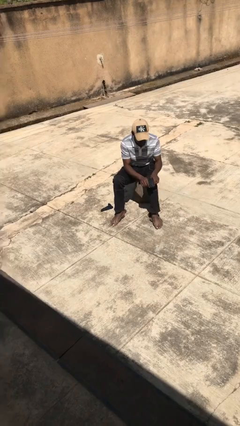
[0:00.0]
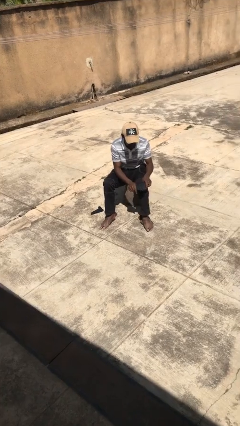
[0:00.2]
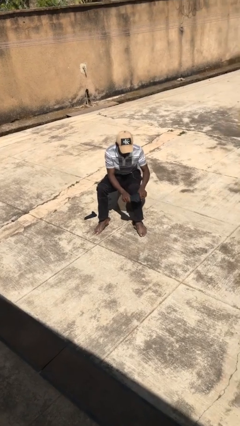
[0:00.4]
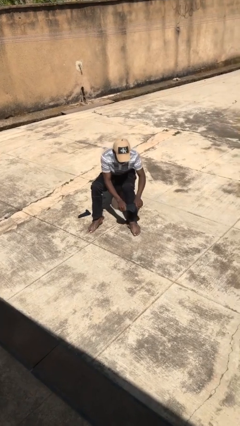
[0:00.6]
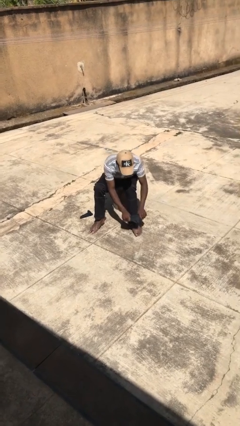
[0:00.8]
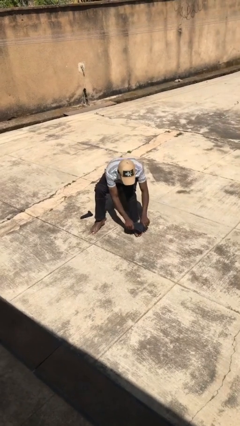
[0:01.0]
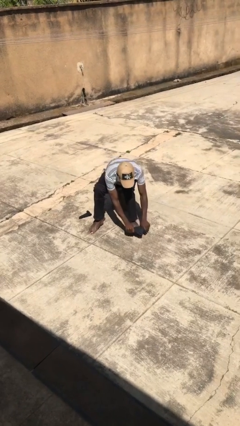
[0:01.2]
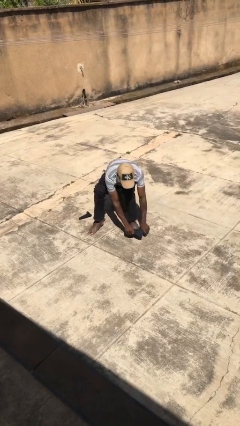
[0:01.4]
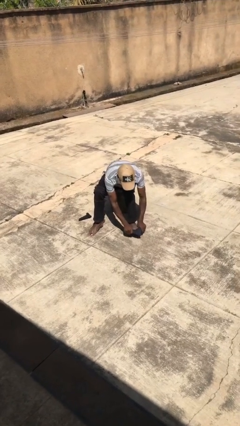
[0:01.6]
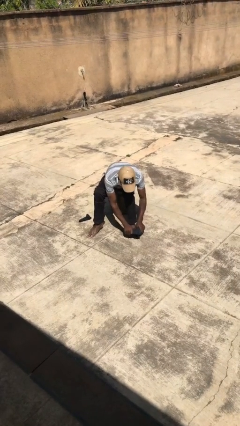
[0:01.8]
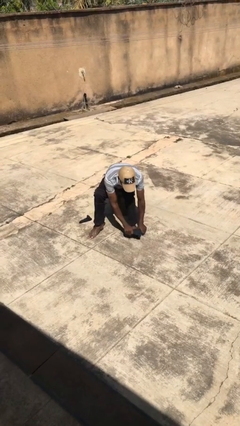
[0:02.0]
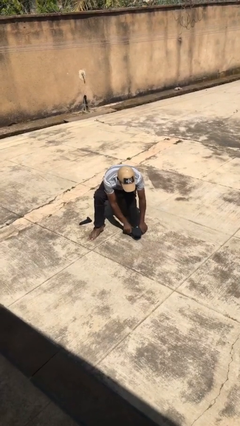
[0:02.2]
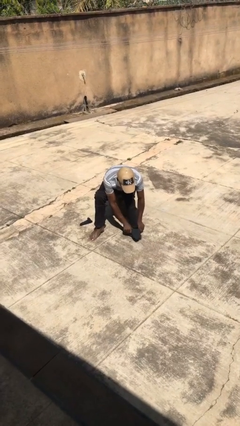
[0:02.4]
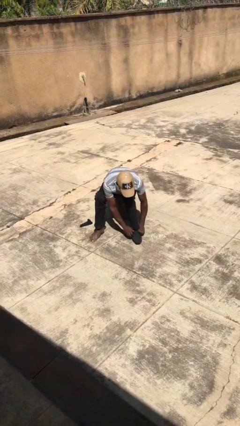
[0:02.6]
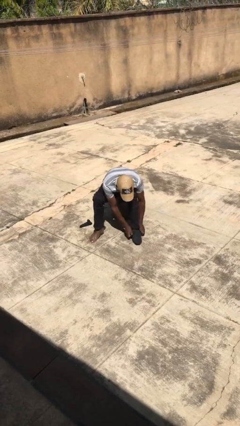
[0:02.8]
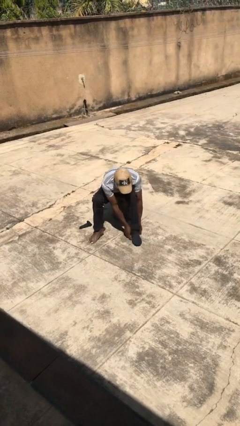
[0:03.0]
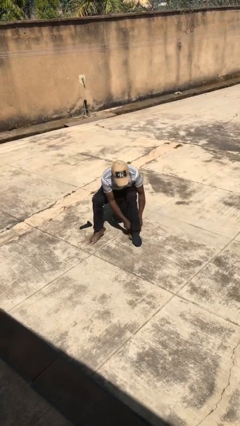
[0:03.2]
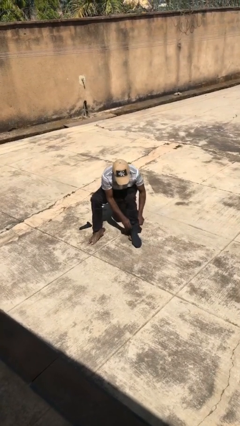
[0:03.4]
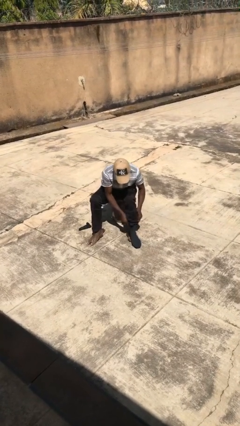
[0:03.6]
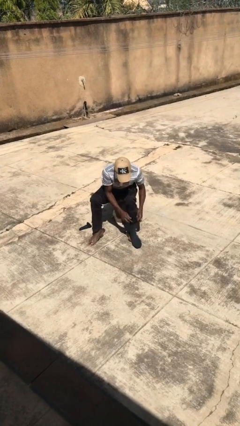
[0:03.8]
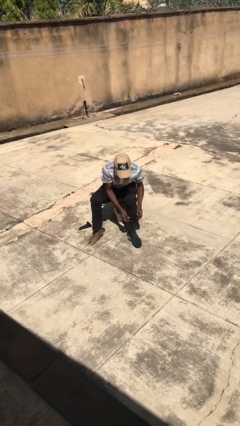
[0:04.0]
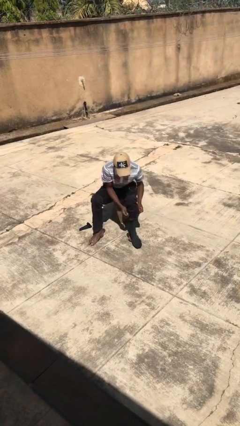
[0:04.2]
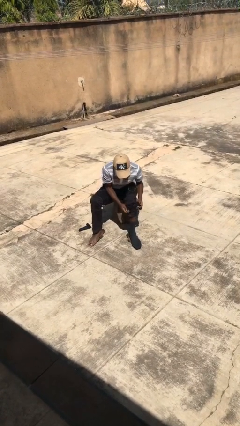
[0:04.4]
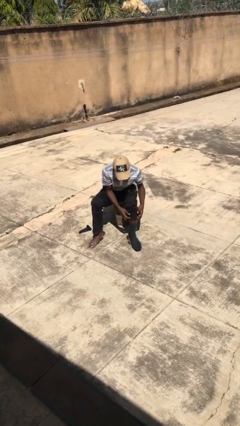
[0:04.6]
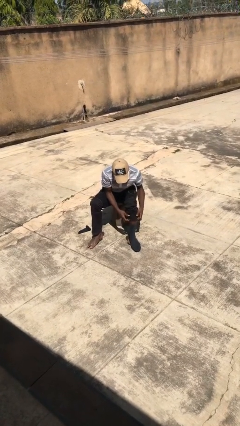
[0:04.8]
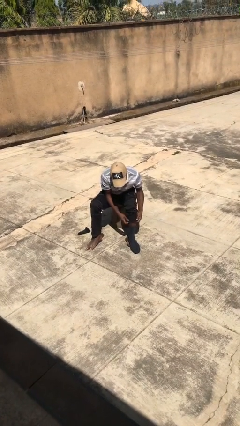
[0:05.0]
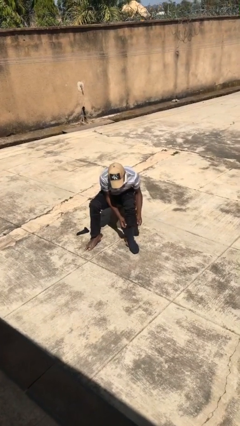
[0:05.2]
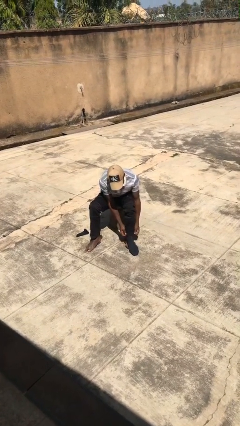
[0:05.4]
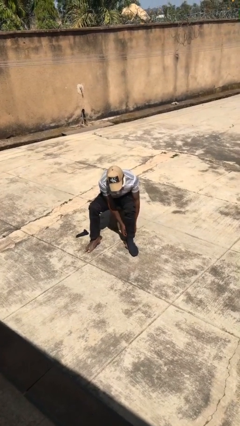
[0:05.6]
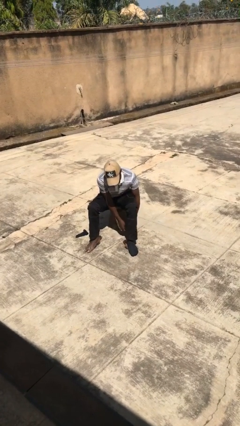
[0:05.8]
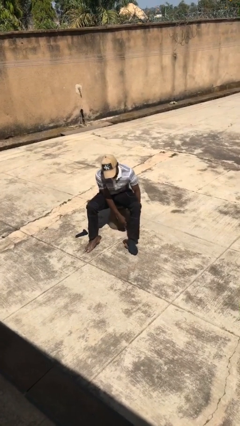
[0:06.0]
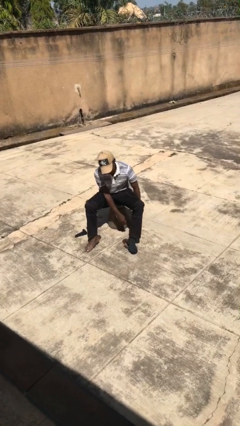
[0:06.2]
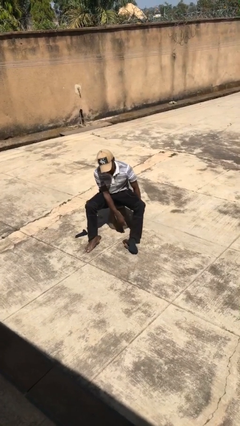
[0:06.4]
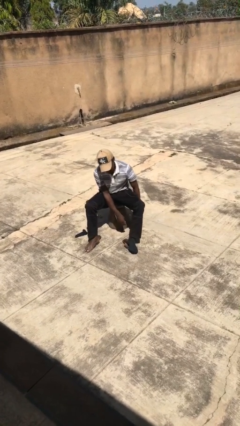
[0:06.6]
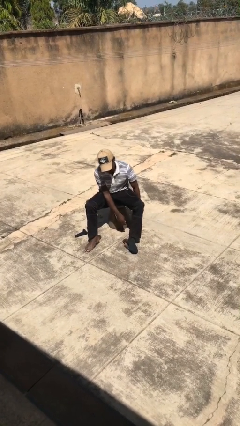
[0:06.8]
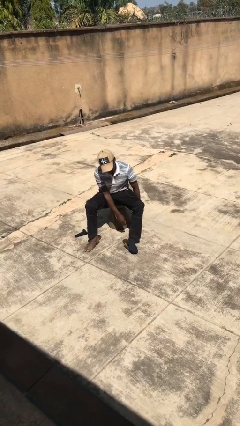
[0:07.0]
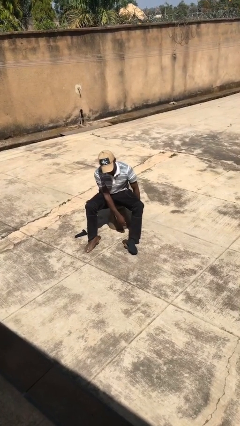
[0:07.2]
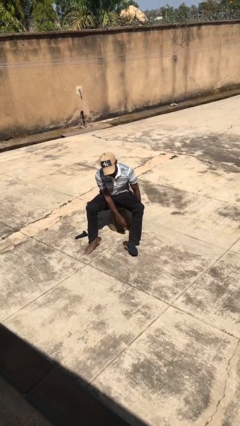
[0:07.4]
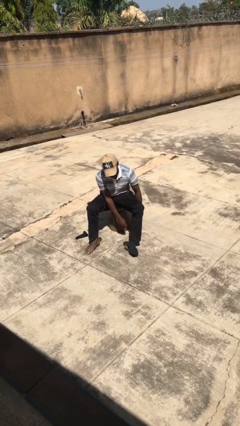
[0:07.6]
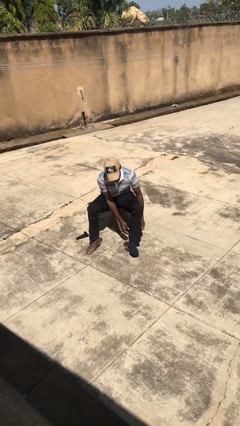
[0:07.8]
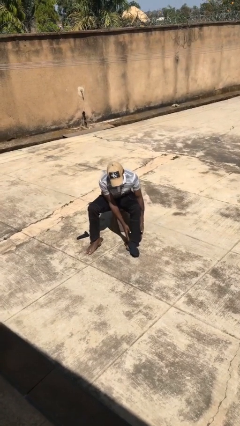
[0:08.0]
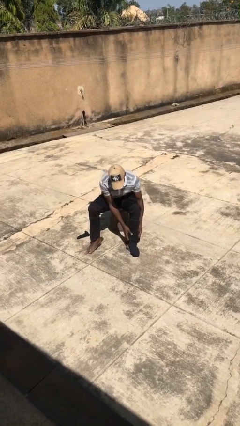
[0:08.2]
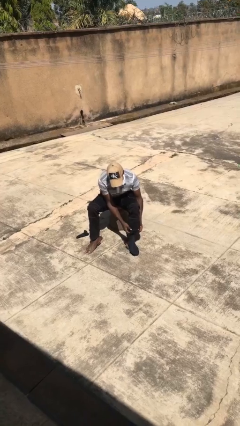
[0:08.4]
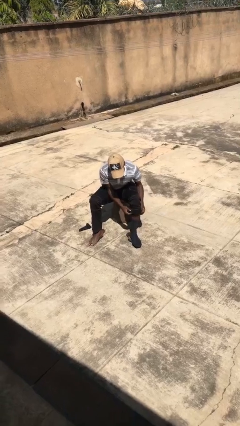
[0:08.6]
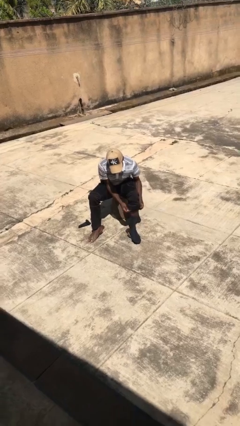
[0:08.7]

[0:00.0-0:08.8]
person puts on socks

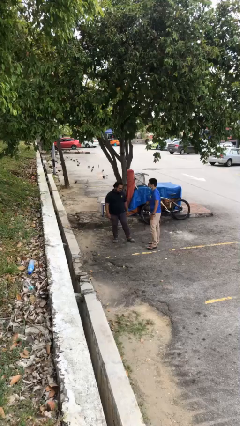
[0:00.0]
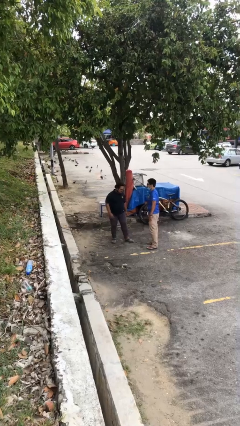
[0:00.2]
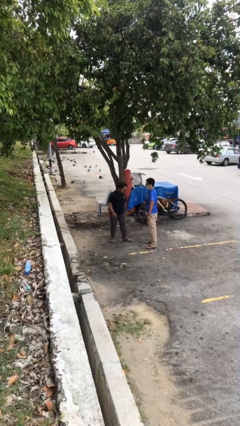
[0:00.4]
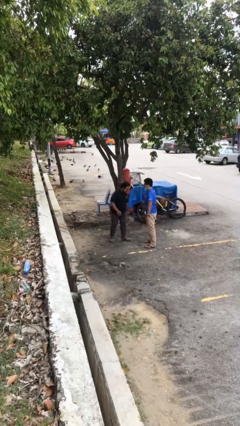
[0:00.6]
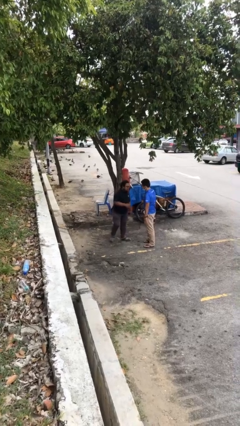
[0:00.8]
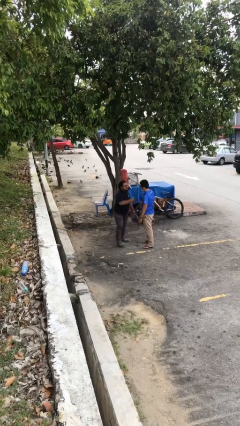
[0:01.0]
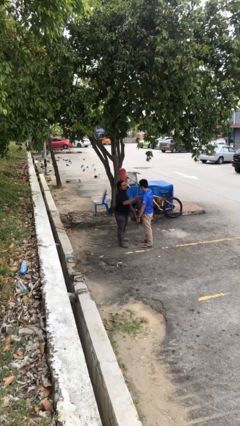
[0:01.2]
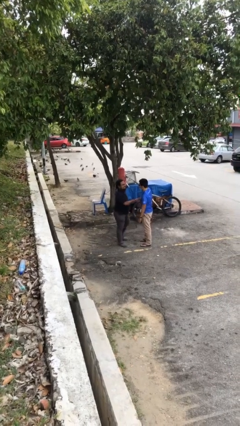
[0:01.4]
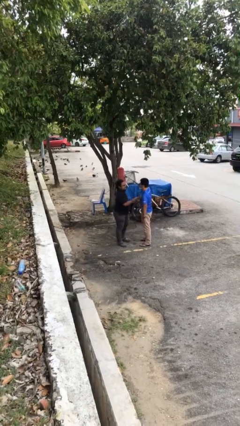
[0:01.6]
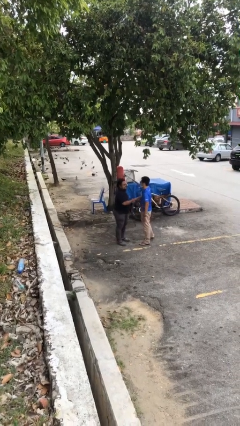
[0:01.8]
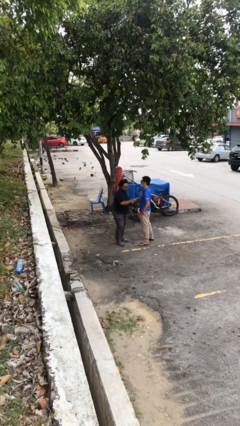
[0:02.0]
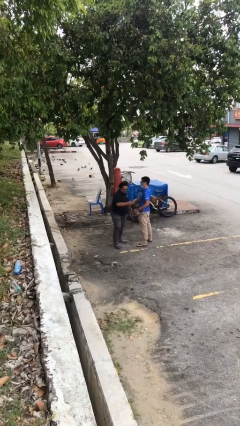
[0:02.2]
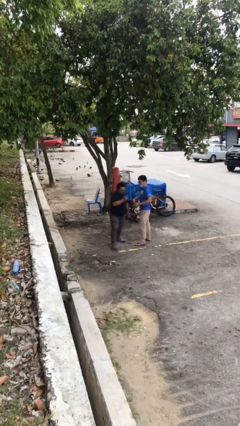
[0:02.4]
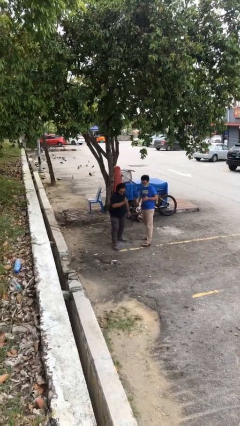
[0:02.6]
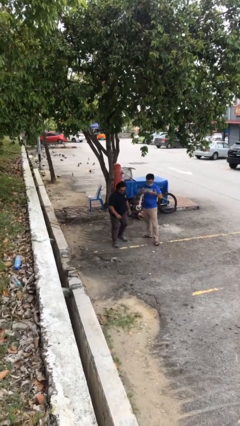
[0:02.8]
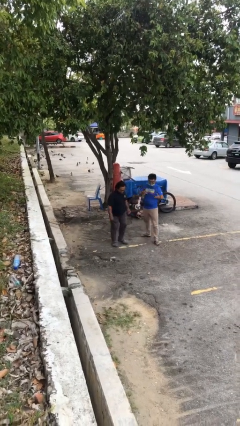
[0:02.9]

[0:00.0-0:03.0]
person shakes hand

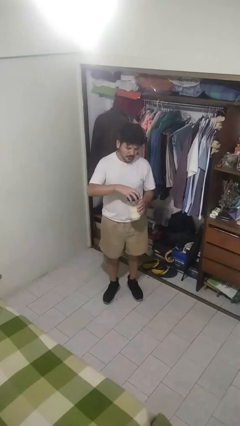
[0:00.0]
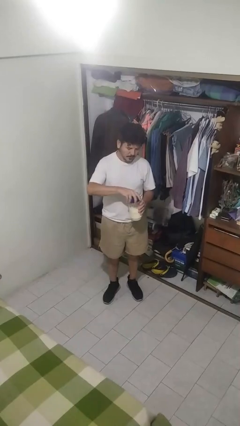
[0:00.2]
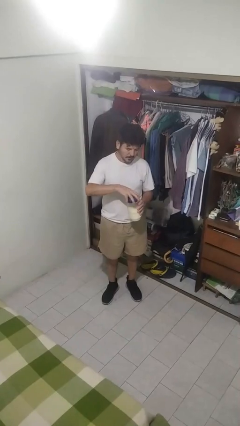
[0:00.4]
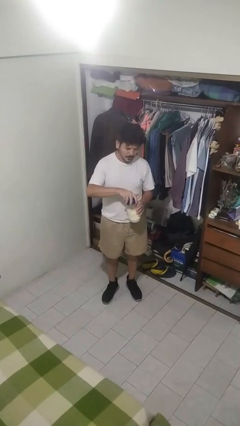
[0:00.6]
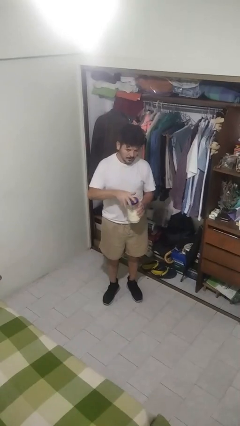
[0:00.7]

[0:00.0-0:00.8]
person closes jar

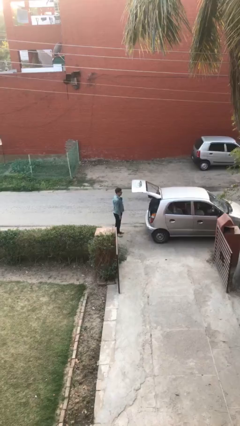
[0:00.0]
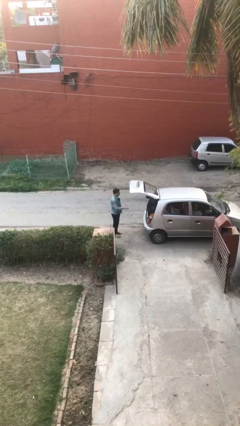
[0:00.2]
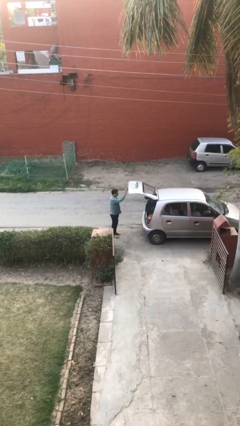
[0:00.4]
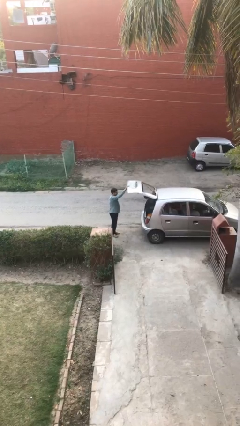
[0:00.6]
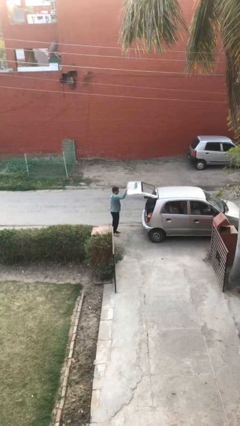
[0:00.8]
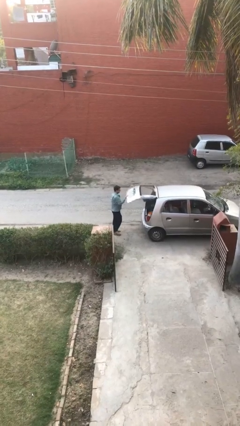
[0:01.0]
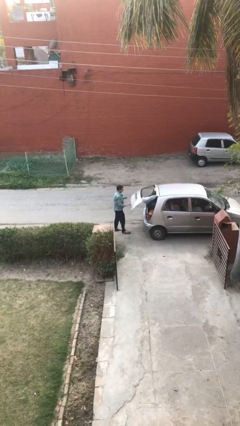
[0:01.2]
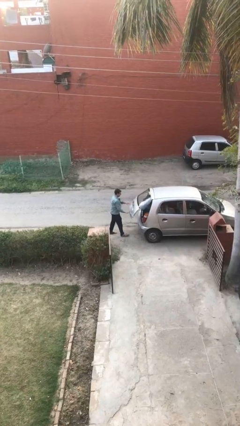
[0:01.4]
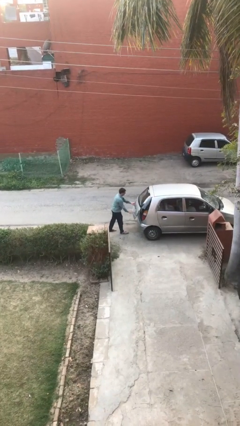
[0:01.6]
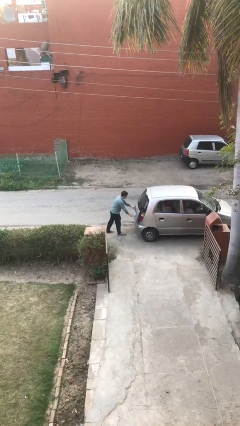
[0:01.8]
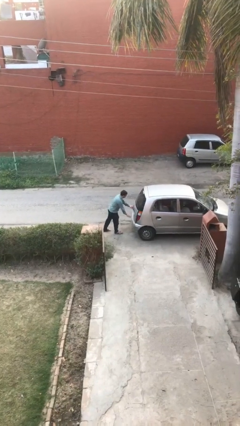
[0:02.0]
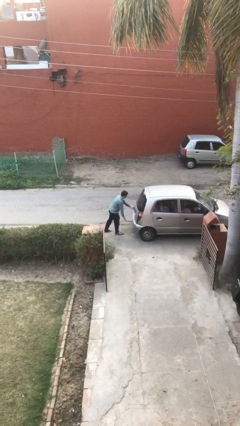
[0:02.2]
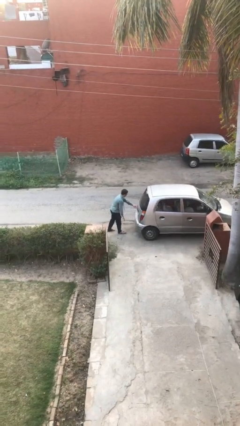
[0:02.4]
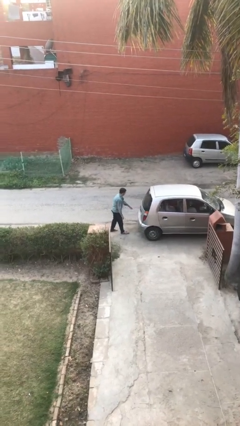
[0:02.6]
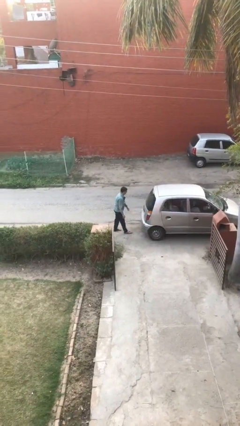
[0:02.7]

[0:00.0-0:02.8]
person closes car trunk

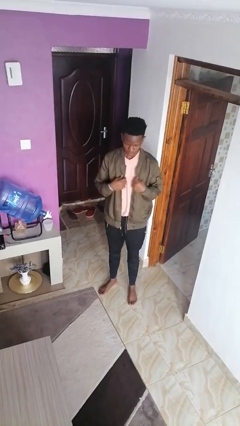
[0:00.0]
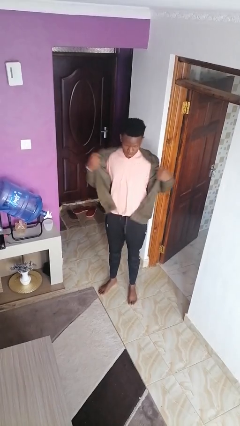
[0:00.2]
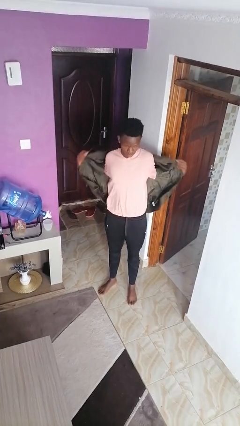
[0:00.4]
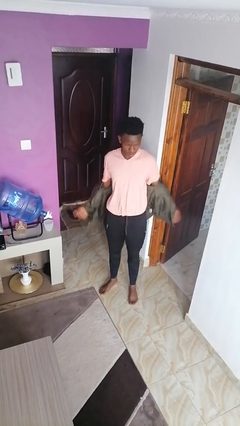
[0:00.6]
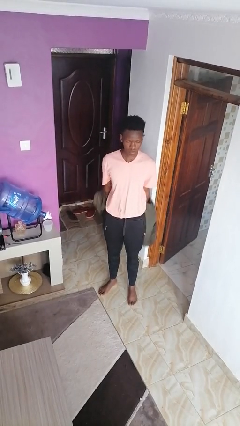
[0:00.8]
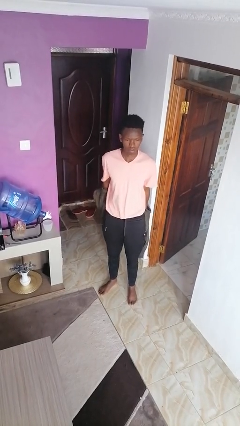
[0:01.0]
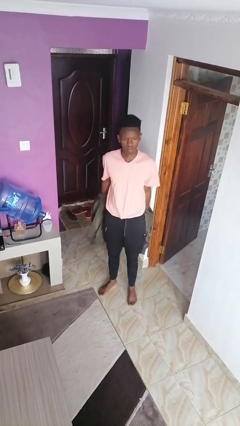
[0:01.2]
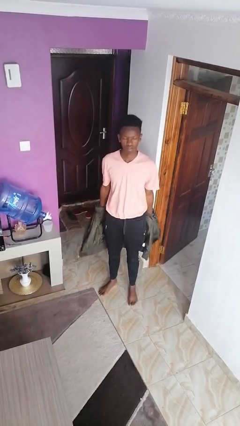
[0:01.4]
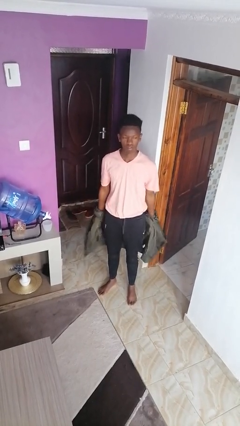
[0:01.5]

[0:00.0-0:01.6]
person takes off jacket

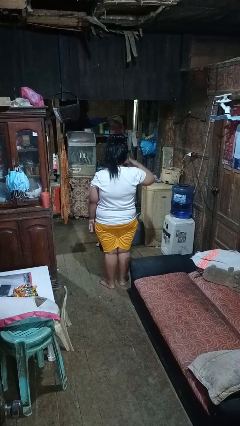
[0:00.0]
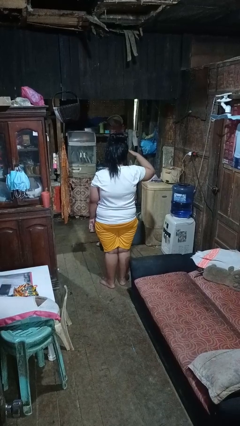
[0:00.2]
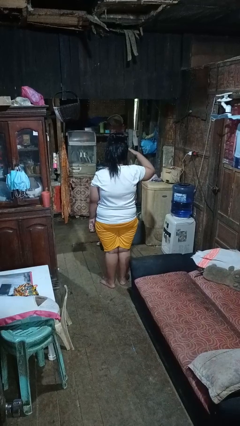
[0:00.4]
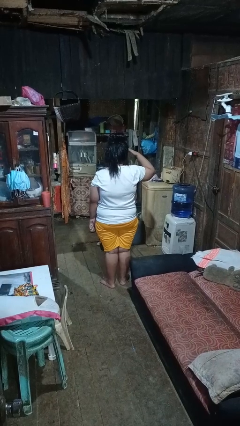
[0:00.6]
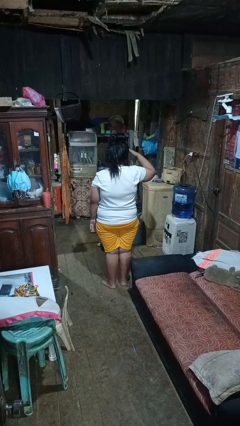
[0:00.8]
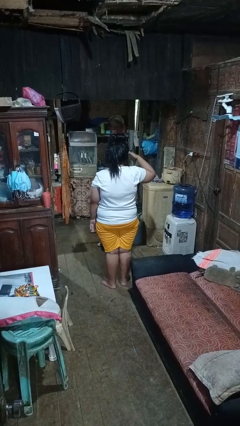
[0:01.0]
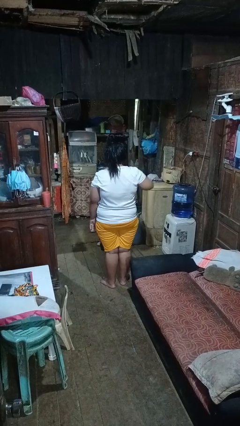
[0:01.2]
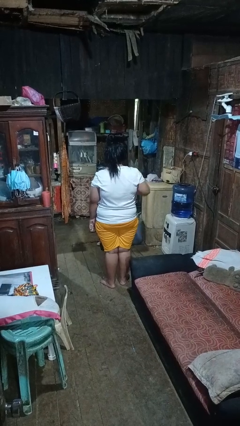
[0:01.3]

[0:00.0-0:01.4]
person salutes
